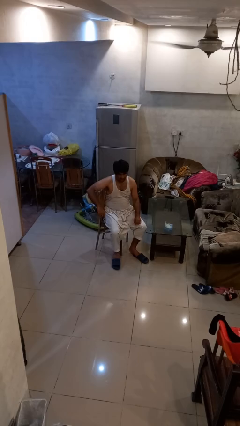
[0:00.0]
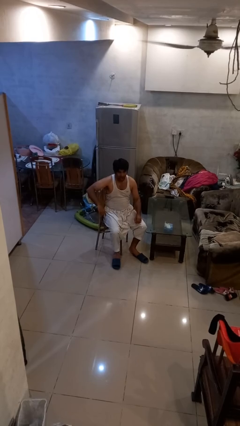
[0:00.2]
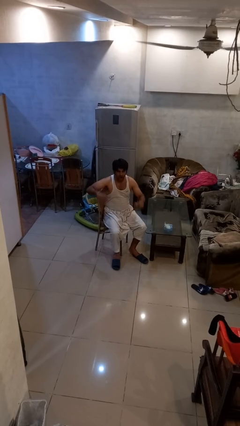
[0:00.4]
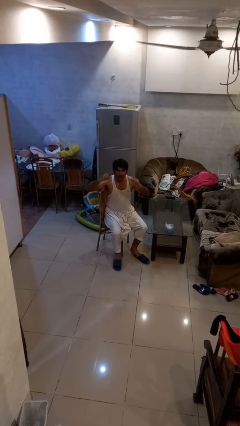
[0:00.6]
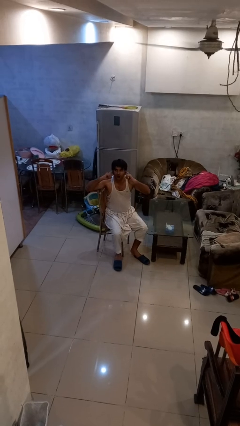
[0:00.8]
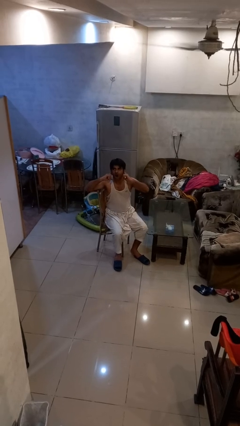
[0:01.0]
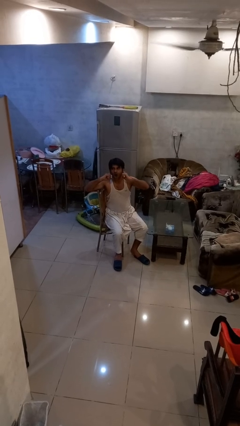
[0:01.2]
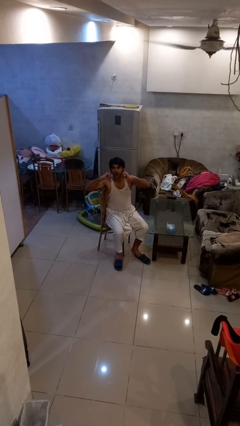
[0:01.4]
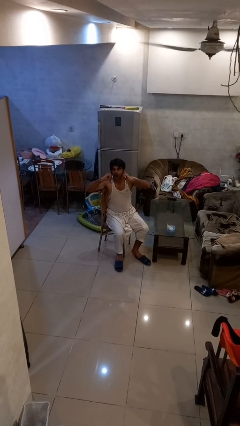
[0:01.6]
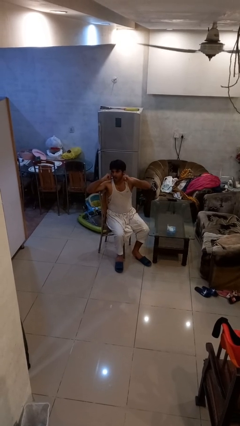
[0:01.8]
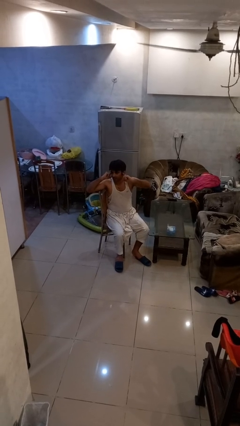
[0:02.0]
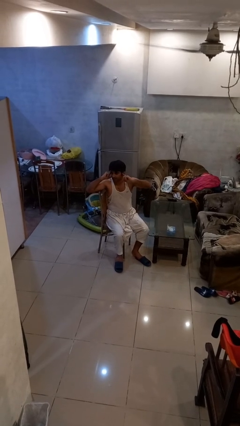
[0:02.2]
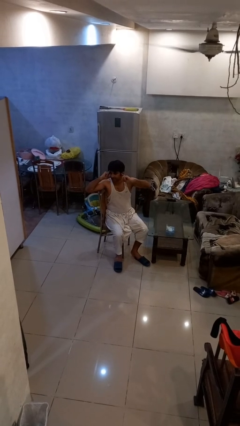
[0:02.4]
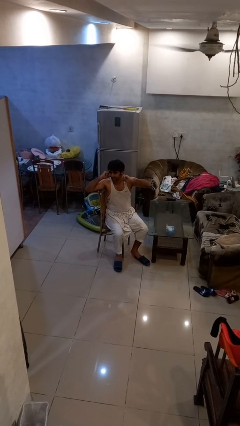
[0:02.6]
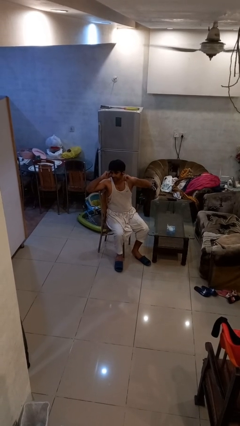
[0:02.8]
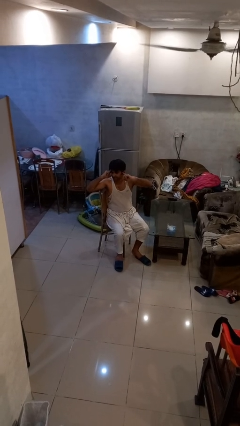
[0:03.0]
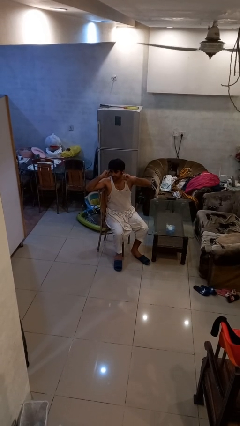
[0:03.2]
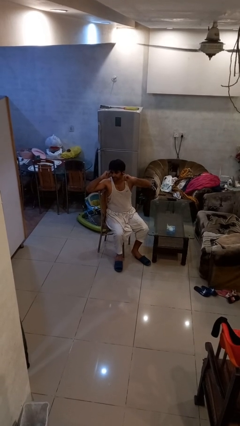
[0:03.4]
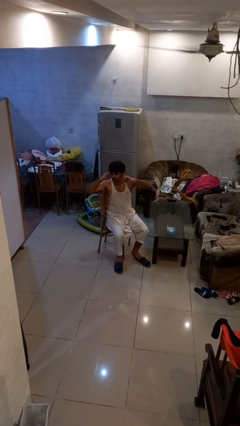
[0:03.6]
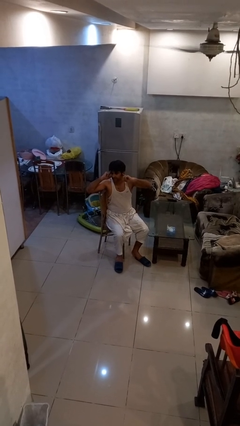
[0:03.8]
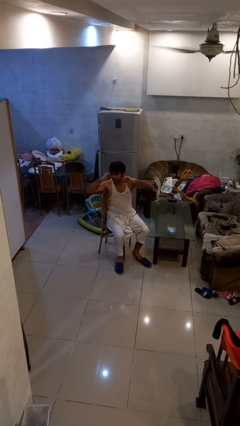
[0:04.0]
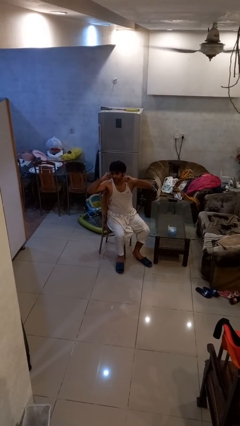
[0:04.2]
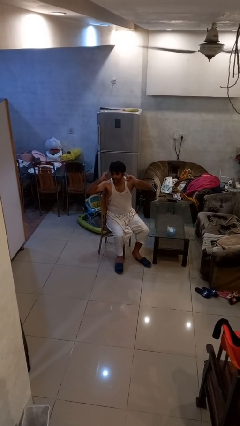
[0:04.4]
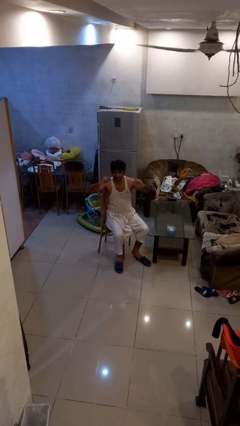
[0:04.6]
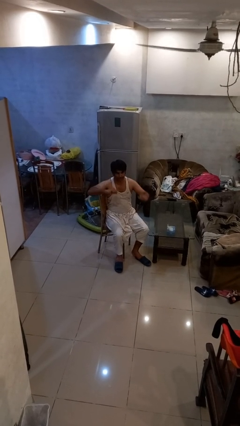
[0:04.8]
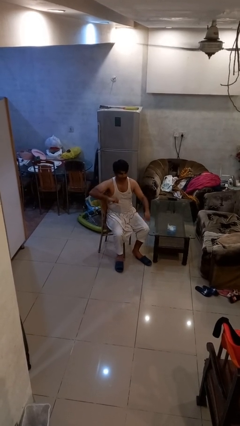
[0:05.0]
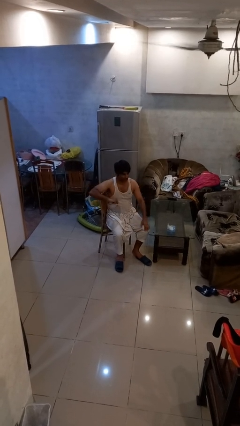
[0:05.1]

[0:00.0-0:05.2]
person puts fingers in ear

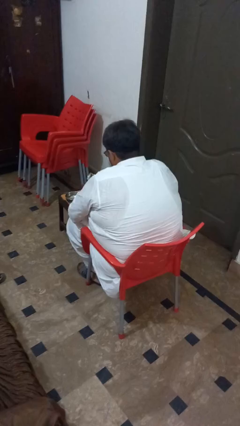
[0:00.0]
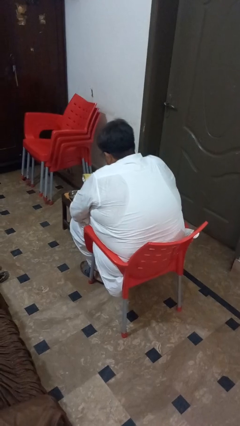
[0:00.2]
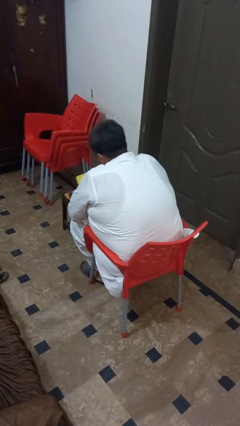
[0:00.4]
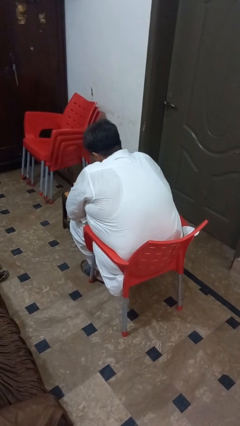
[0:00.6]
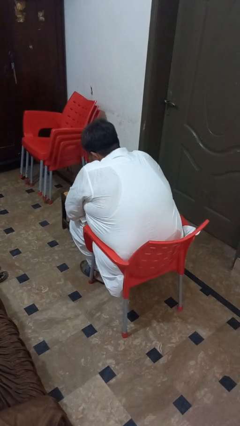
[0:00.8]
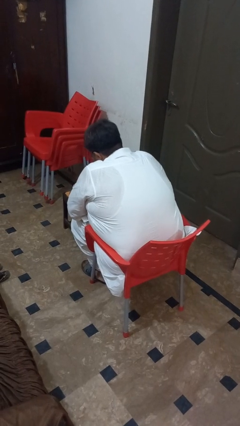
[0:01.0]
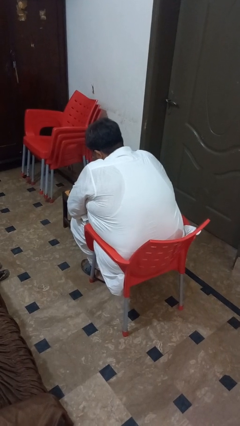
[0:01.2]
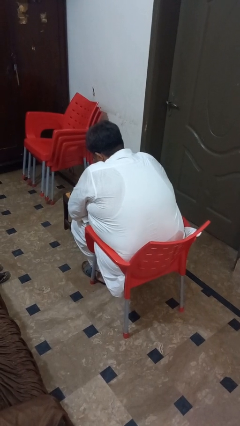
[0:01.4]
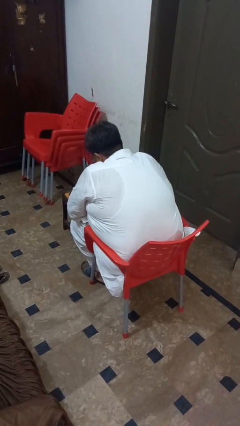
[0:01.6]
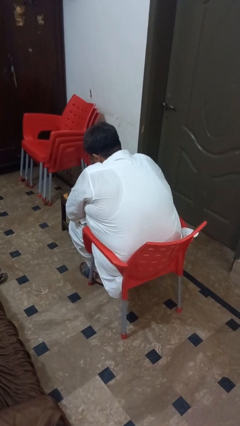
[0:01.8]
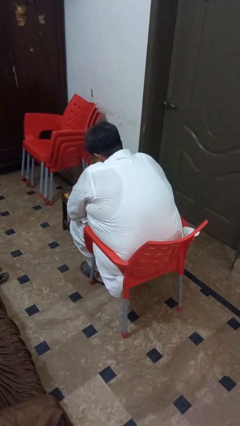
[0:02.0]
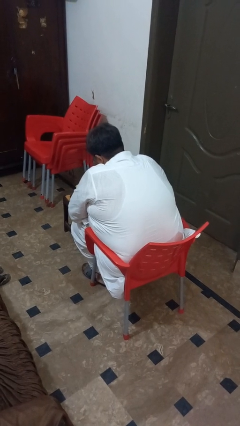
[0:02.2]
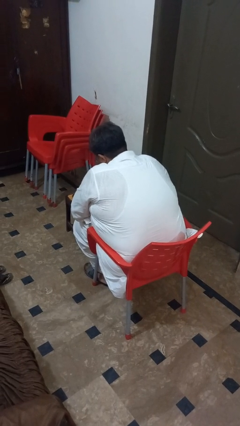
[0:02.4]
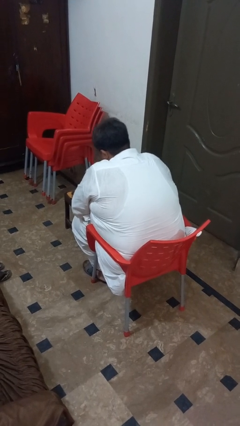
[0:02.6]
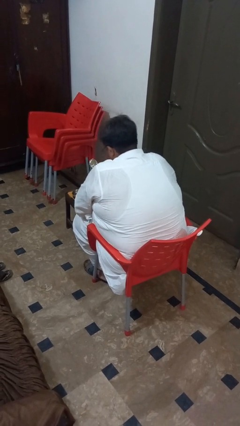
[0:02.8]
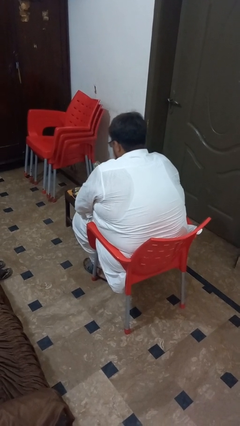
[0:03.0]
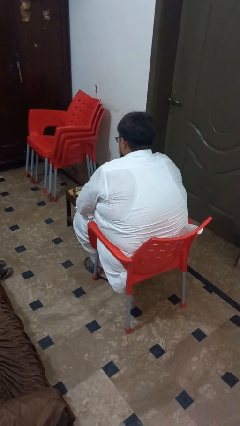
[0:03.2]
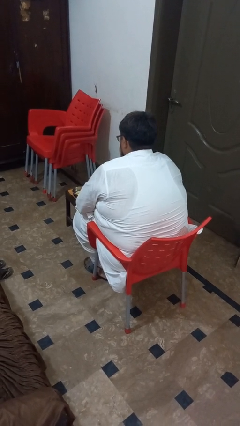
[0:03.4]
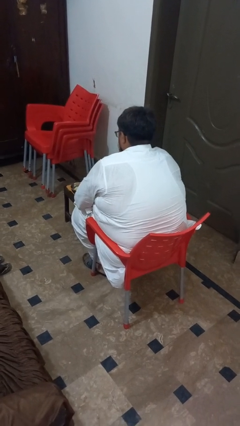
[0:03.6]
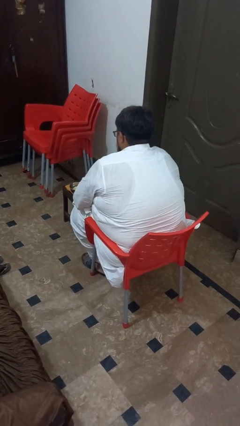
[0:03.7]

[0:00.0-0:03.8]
person pours into bowl

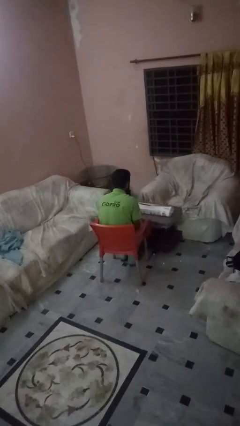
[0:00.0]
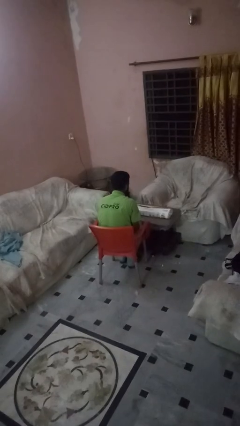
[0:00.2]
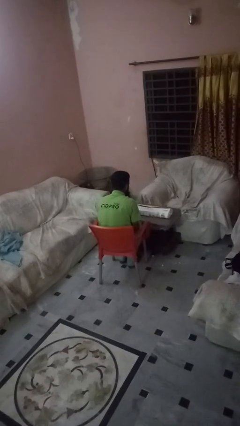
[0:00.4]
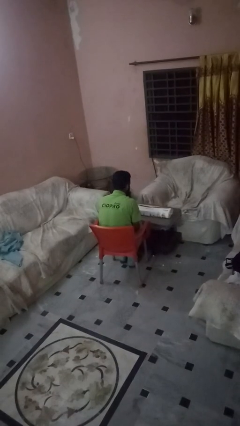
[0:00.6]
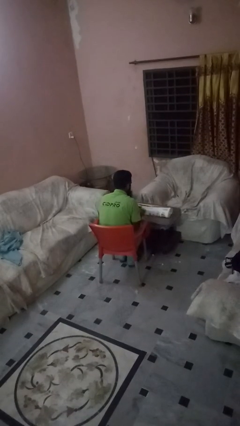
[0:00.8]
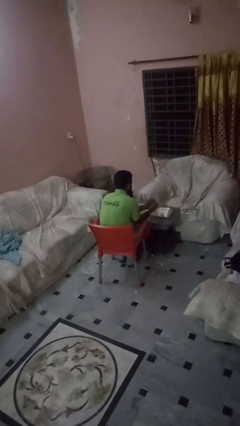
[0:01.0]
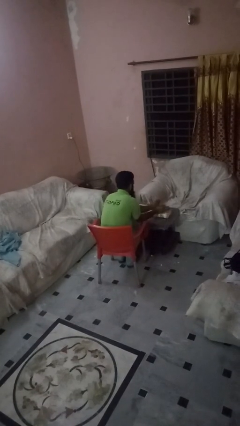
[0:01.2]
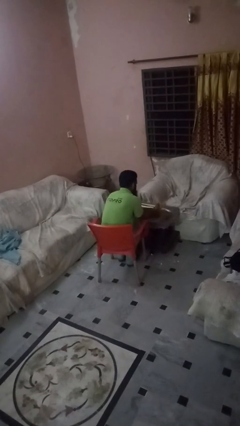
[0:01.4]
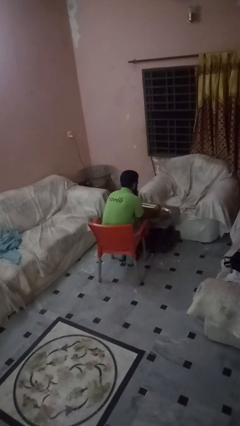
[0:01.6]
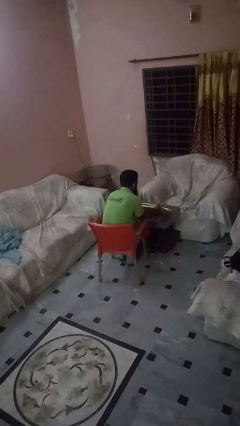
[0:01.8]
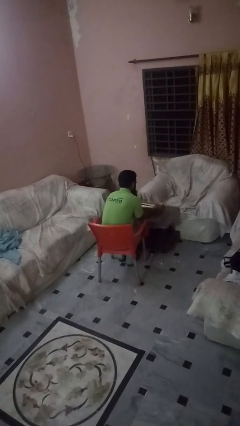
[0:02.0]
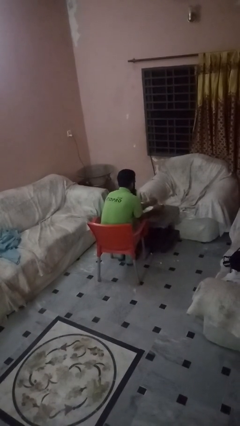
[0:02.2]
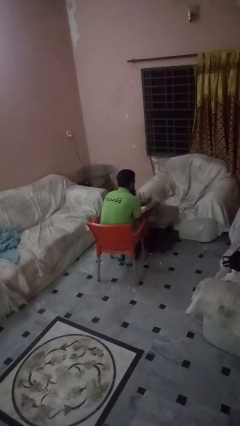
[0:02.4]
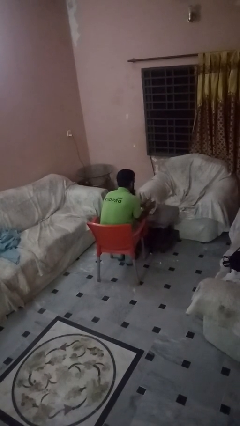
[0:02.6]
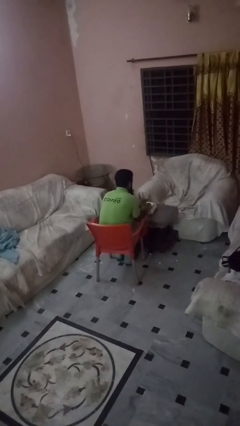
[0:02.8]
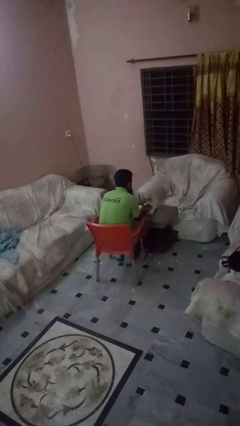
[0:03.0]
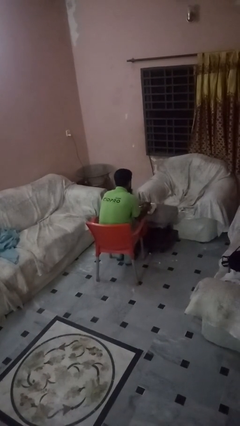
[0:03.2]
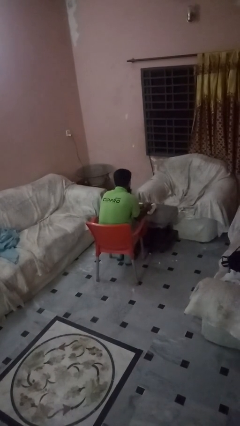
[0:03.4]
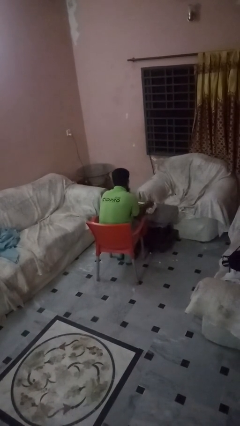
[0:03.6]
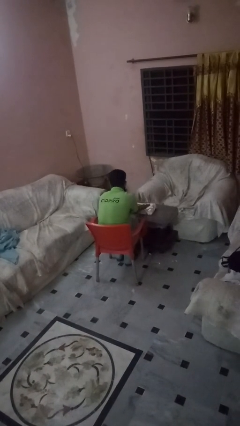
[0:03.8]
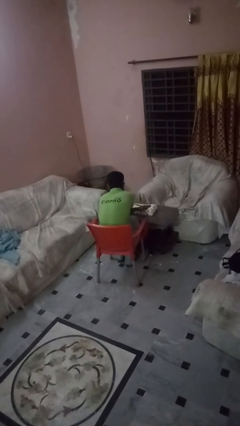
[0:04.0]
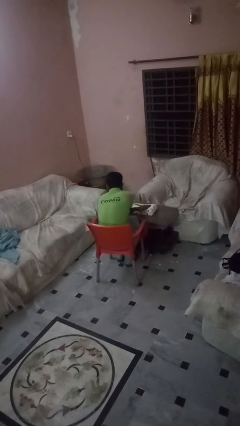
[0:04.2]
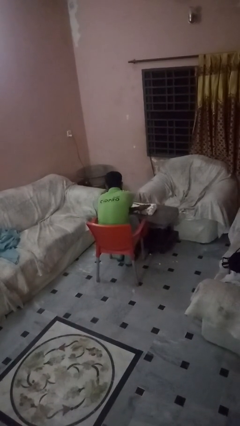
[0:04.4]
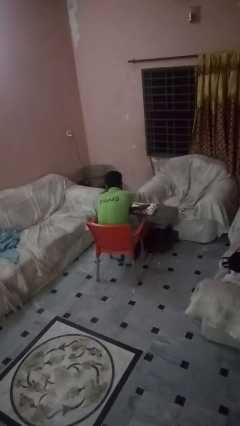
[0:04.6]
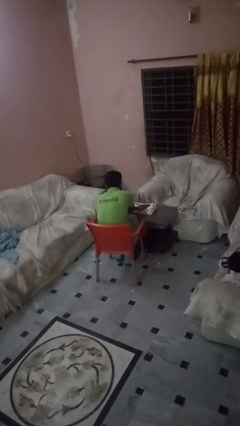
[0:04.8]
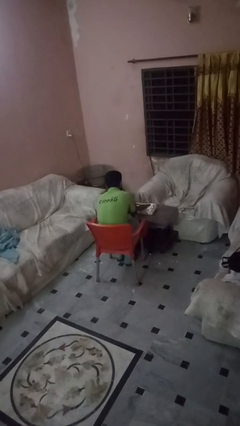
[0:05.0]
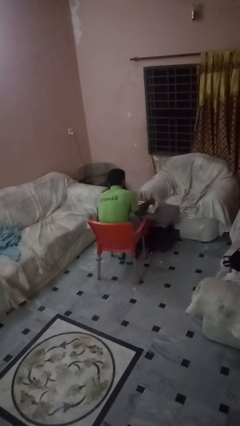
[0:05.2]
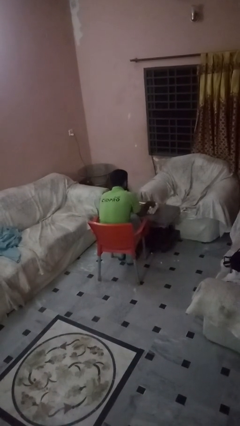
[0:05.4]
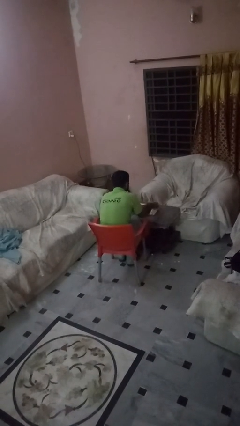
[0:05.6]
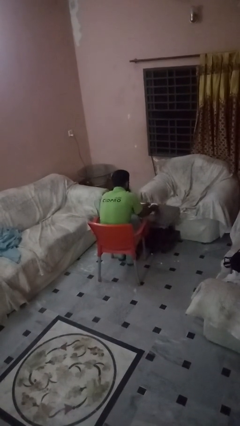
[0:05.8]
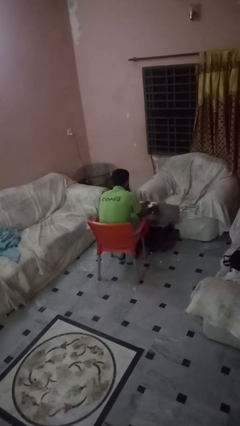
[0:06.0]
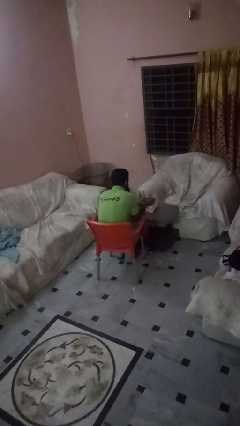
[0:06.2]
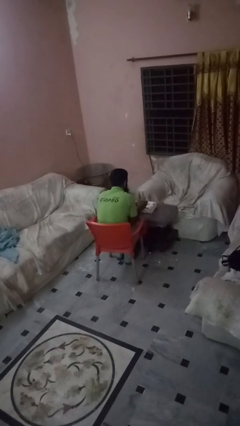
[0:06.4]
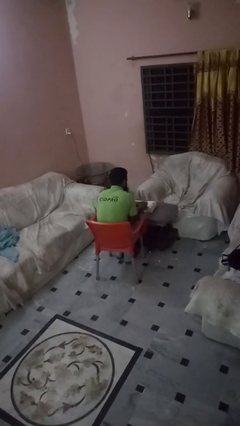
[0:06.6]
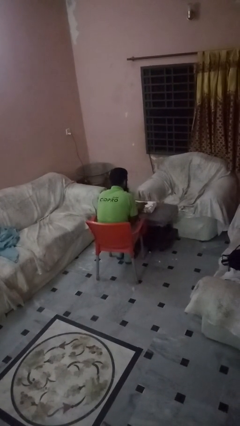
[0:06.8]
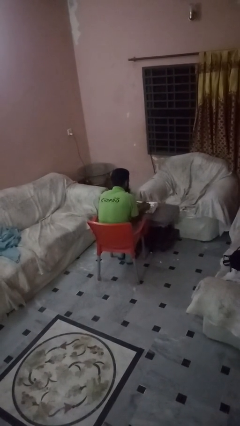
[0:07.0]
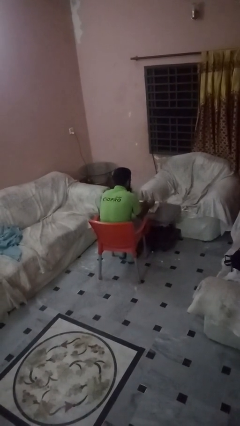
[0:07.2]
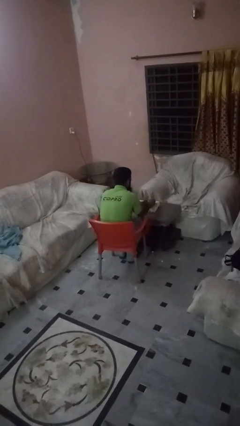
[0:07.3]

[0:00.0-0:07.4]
person wraps box

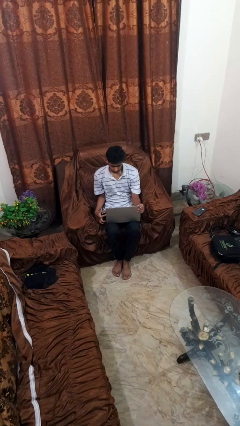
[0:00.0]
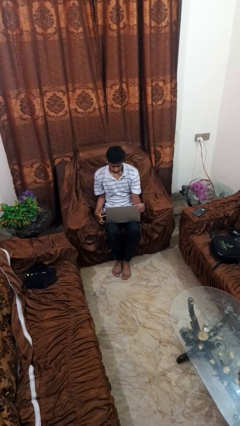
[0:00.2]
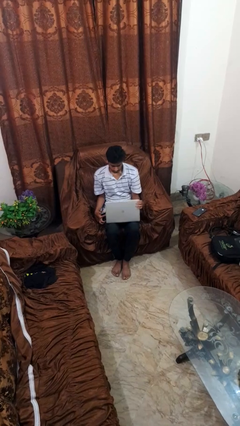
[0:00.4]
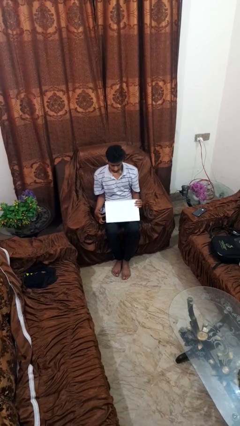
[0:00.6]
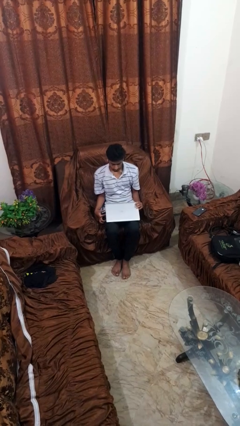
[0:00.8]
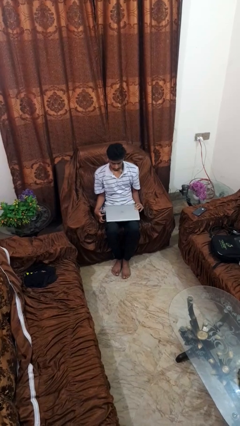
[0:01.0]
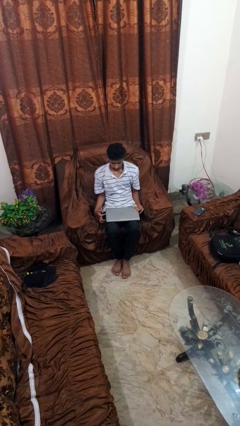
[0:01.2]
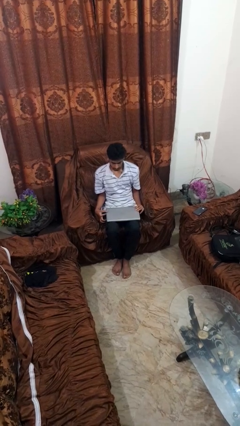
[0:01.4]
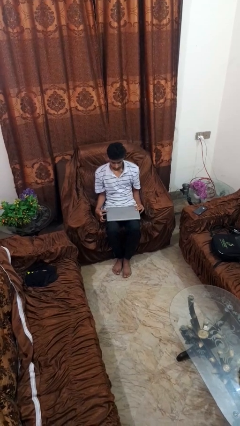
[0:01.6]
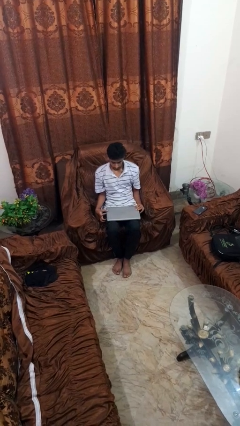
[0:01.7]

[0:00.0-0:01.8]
person closes laptop
